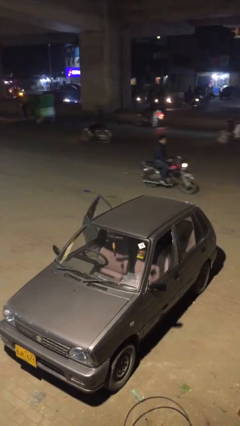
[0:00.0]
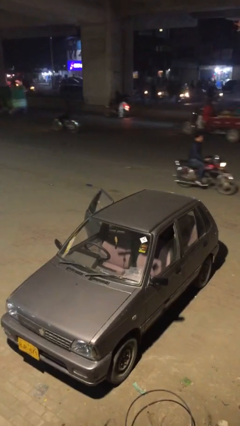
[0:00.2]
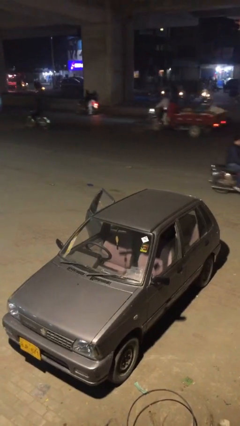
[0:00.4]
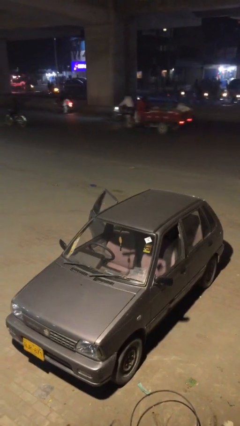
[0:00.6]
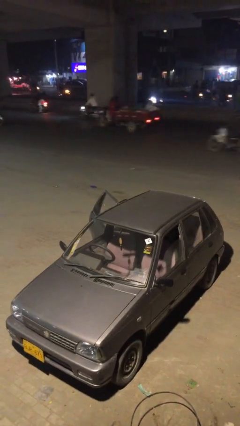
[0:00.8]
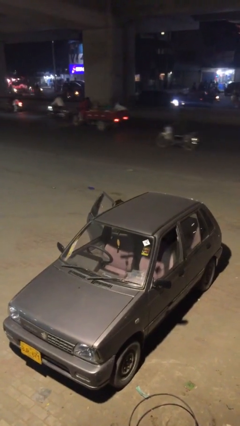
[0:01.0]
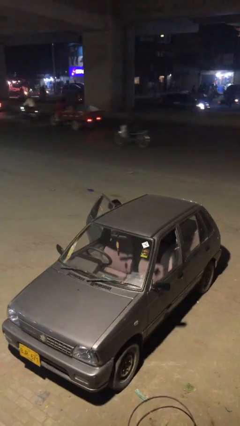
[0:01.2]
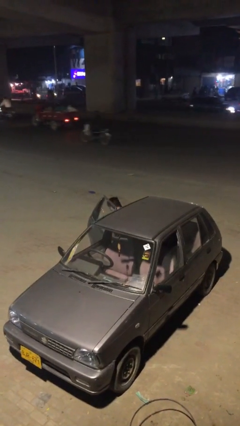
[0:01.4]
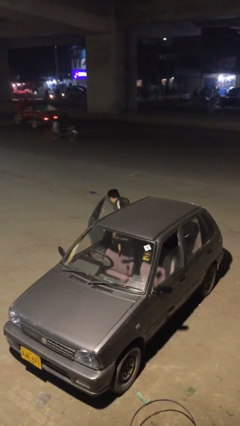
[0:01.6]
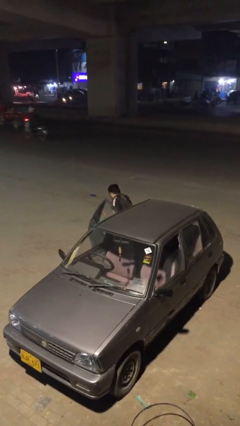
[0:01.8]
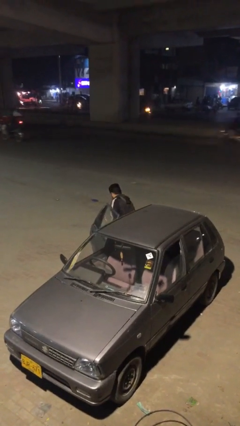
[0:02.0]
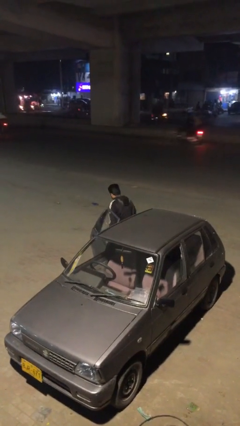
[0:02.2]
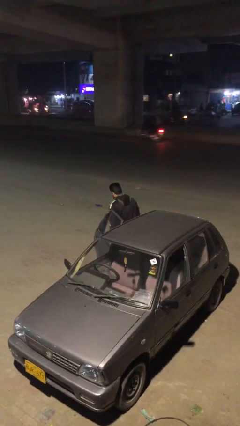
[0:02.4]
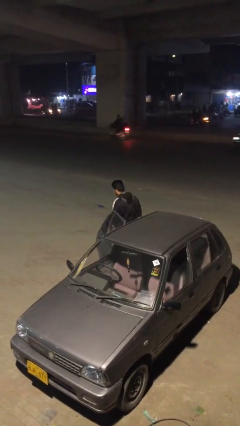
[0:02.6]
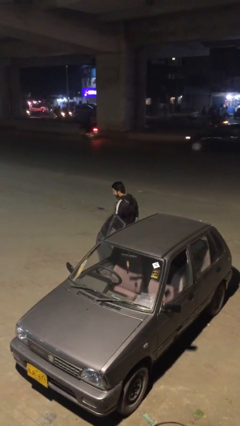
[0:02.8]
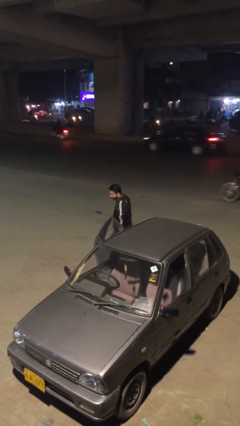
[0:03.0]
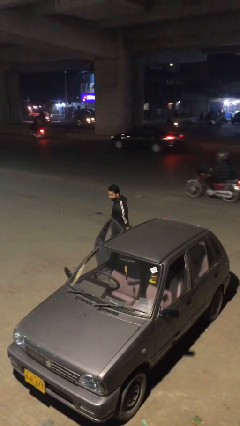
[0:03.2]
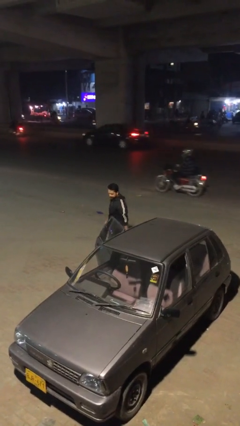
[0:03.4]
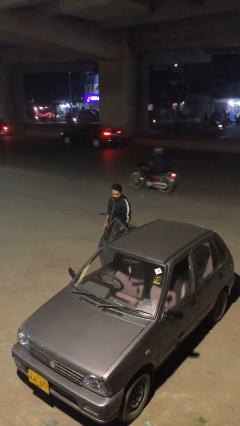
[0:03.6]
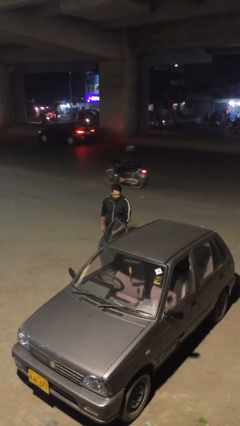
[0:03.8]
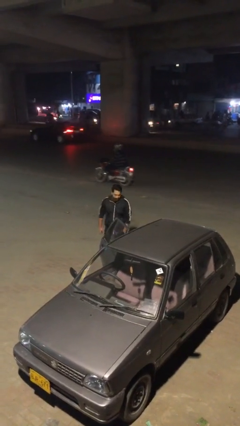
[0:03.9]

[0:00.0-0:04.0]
person exits car

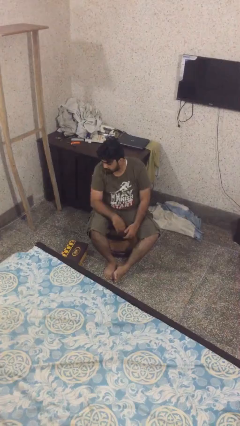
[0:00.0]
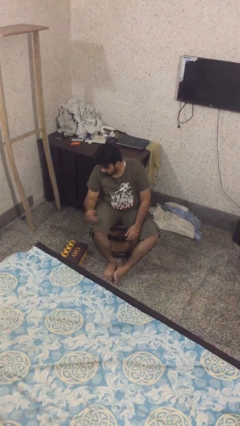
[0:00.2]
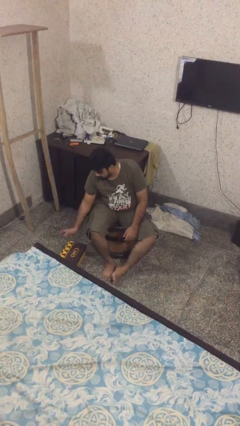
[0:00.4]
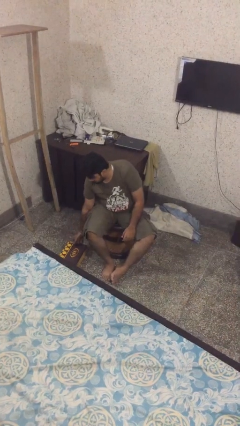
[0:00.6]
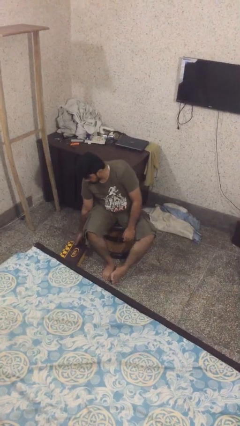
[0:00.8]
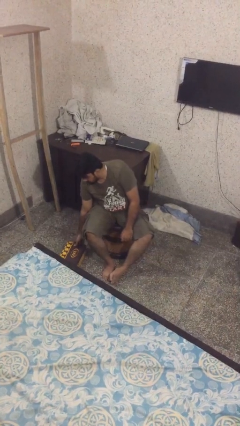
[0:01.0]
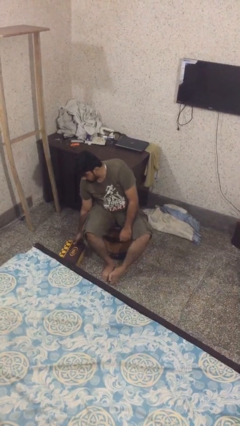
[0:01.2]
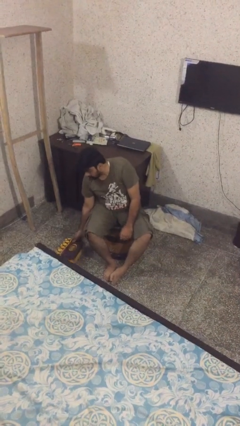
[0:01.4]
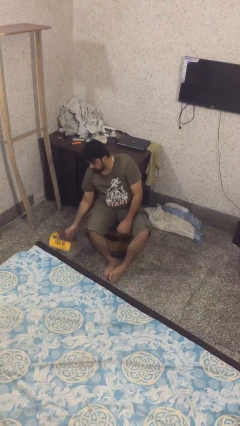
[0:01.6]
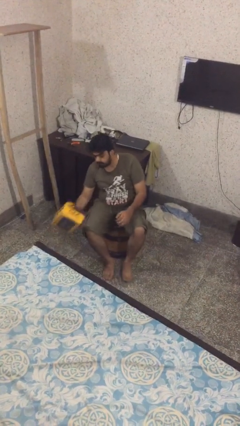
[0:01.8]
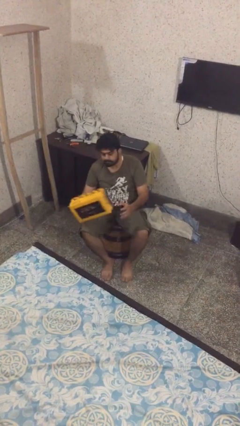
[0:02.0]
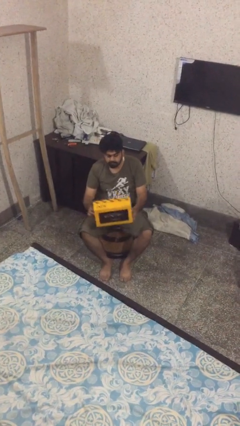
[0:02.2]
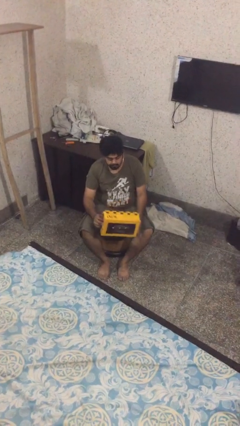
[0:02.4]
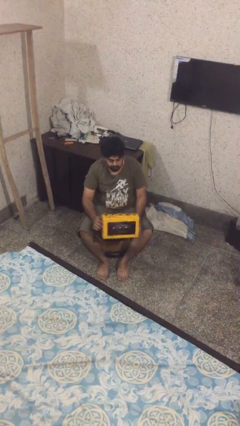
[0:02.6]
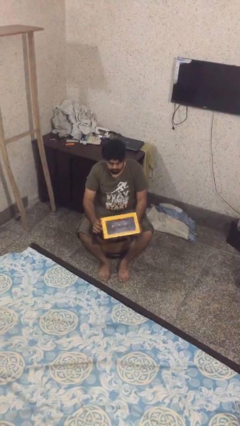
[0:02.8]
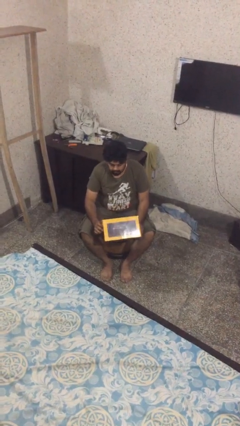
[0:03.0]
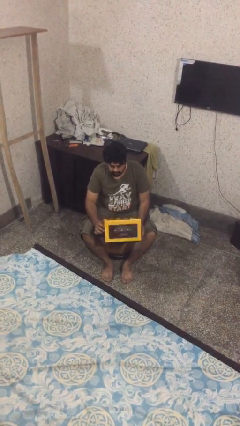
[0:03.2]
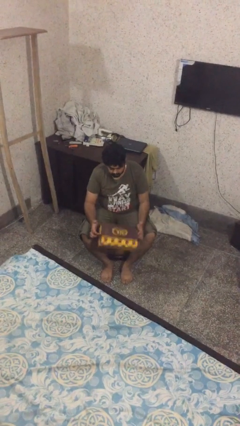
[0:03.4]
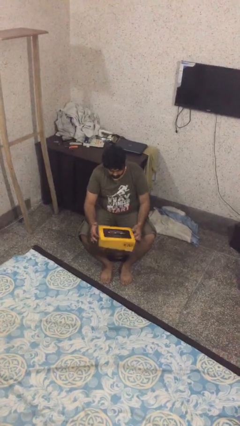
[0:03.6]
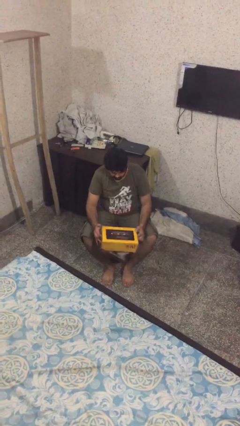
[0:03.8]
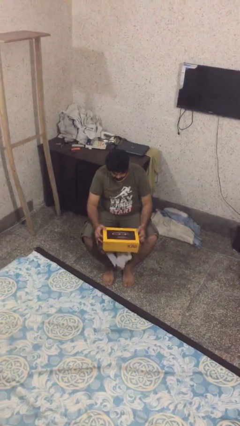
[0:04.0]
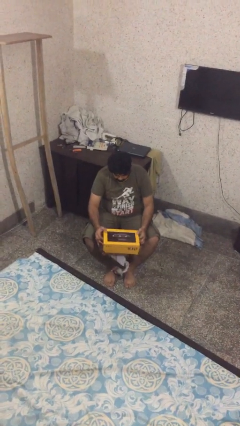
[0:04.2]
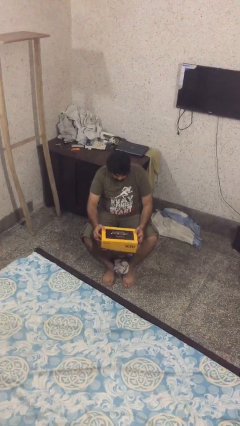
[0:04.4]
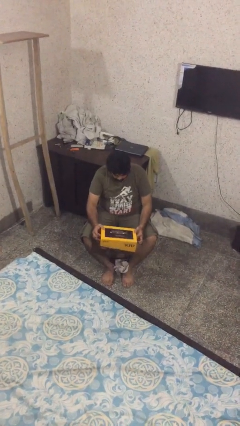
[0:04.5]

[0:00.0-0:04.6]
person picks up object from floor

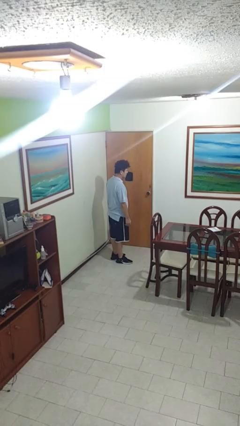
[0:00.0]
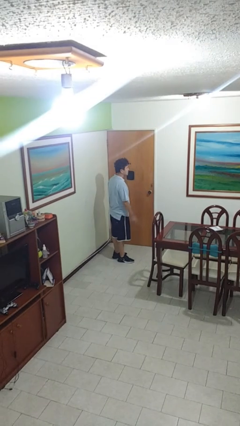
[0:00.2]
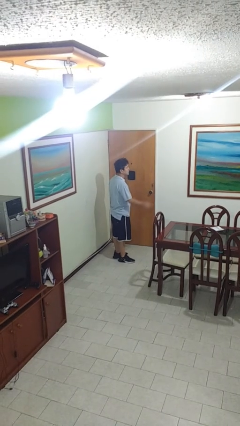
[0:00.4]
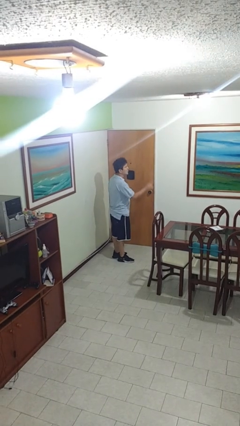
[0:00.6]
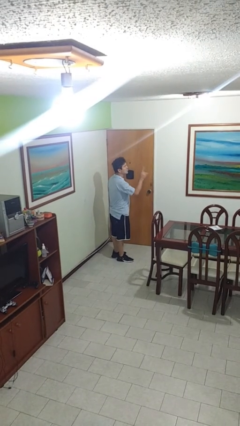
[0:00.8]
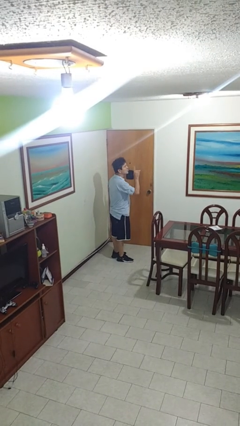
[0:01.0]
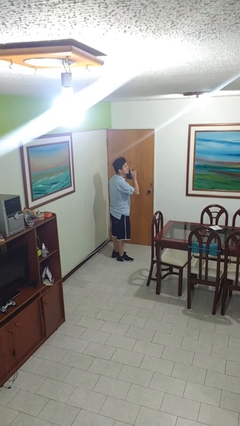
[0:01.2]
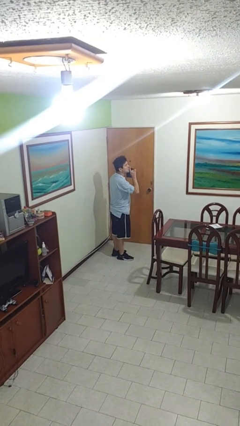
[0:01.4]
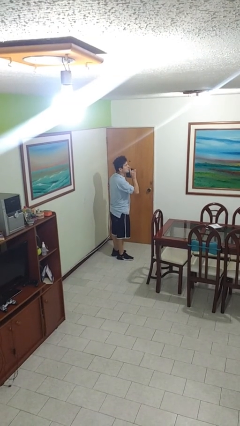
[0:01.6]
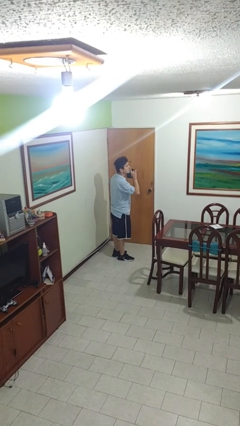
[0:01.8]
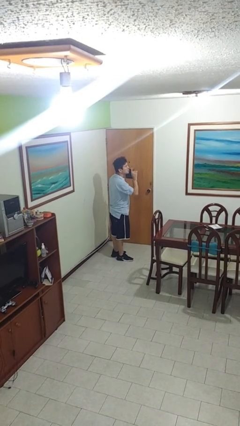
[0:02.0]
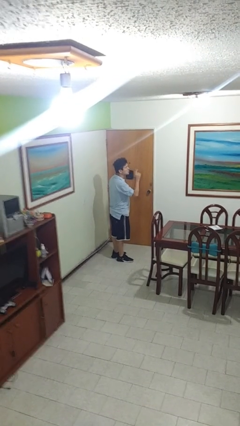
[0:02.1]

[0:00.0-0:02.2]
person gestures be quiet

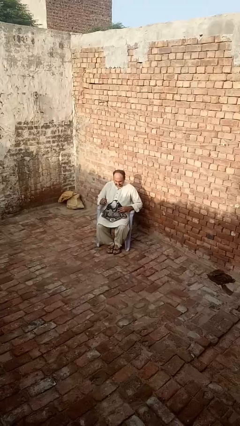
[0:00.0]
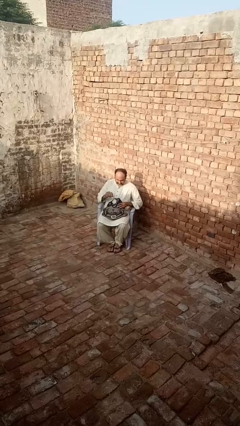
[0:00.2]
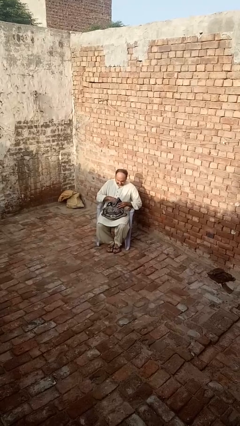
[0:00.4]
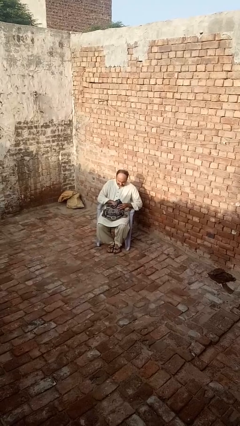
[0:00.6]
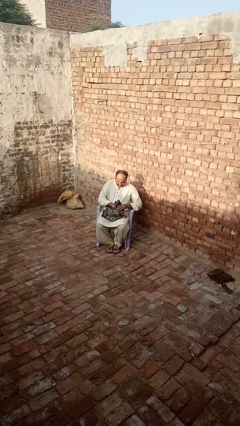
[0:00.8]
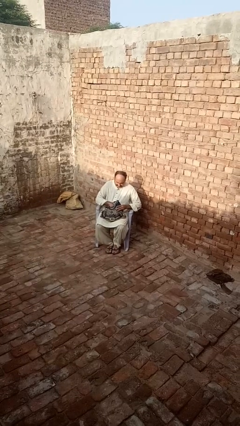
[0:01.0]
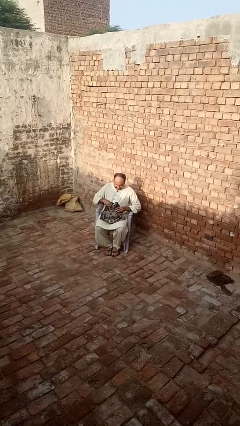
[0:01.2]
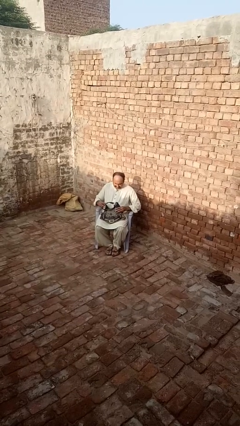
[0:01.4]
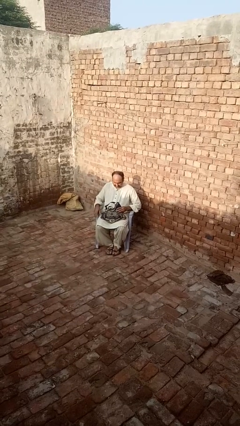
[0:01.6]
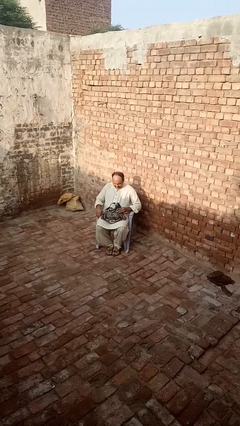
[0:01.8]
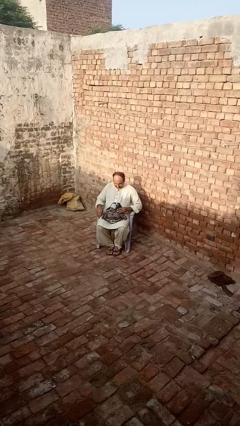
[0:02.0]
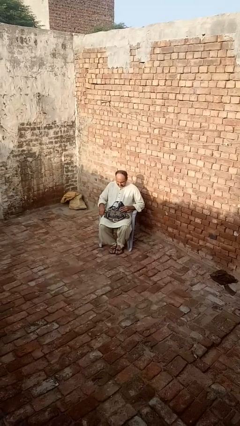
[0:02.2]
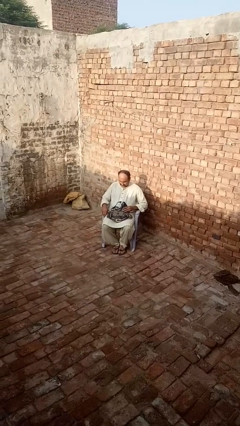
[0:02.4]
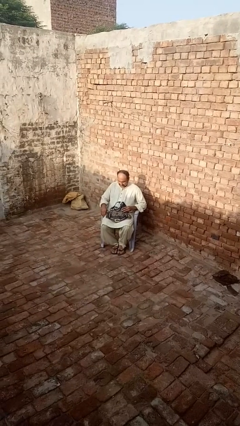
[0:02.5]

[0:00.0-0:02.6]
person puts object into purse

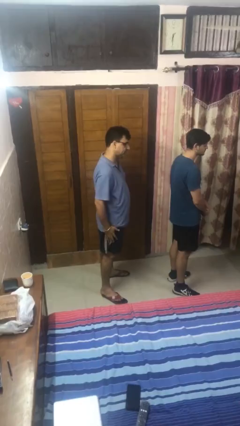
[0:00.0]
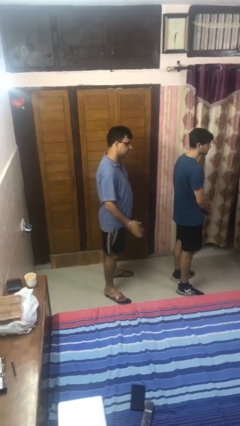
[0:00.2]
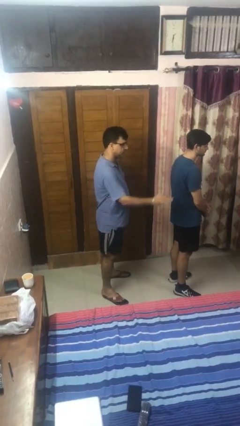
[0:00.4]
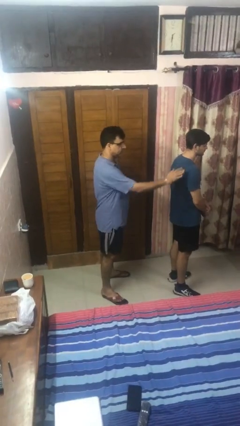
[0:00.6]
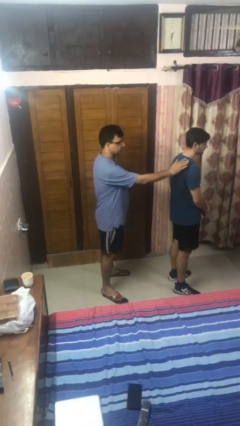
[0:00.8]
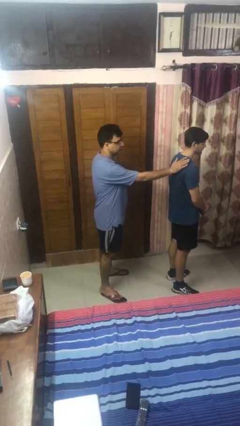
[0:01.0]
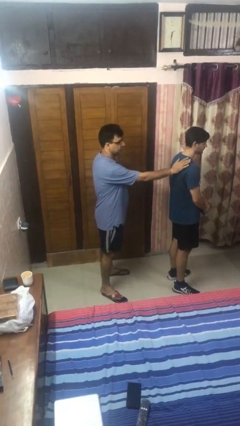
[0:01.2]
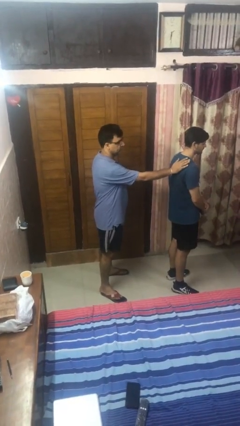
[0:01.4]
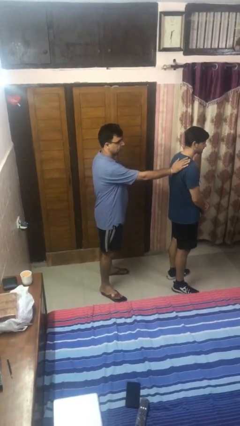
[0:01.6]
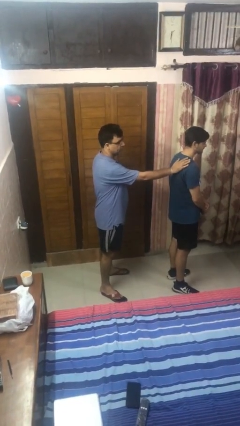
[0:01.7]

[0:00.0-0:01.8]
person touches back of person

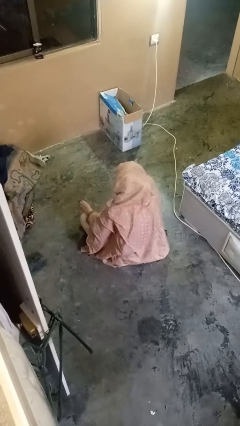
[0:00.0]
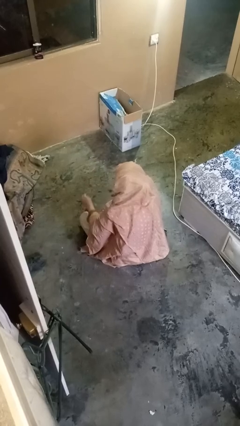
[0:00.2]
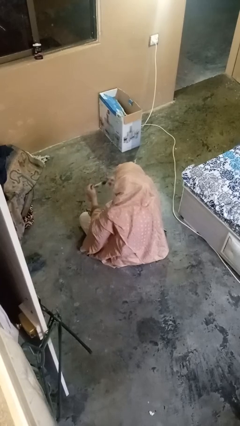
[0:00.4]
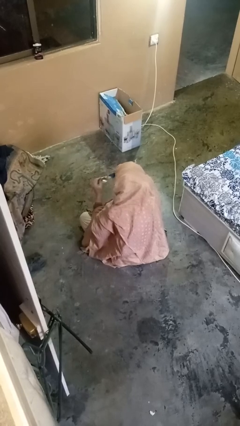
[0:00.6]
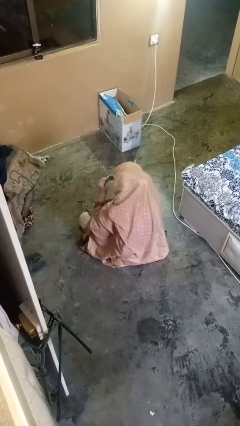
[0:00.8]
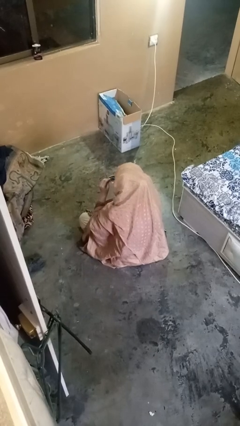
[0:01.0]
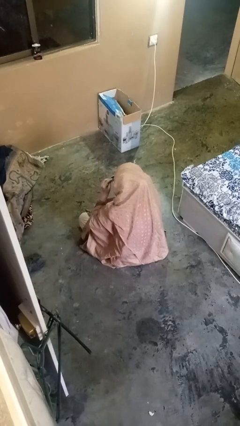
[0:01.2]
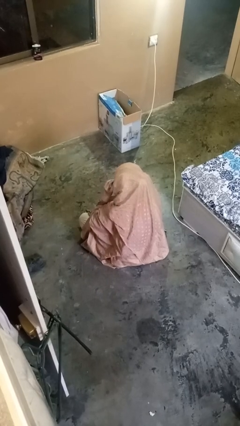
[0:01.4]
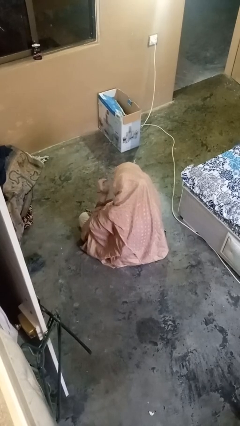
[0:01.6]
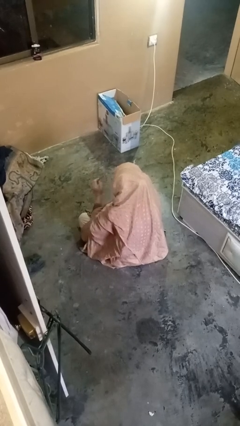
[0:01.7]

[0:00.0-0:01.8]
person puts on glasses
